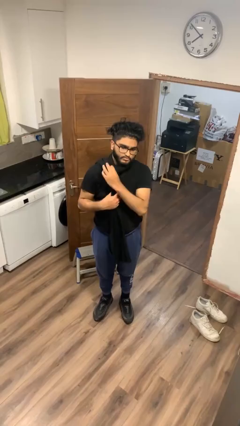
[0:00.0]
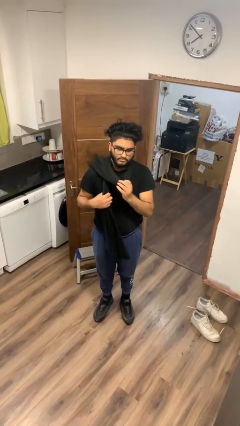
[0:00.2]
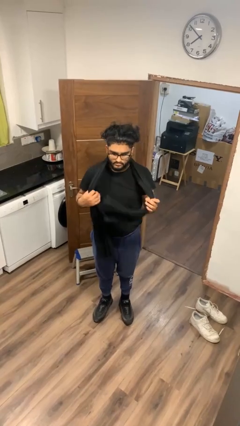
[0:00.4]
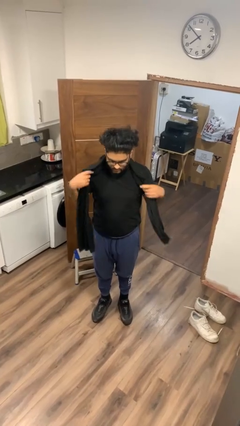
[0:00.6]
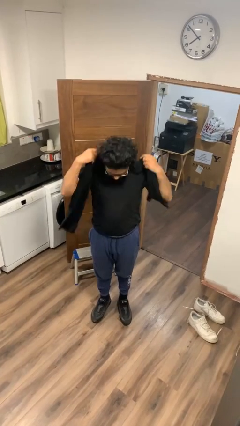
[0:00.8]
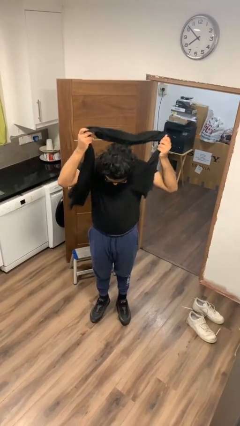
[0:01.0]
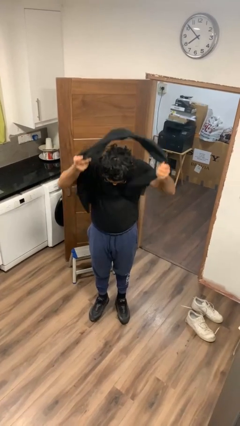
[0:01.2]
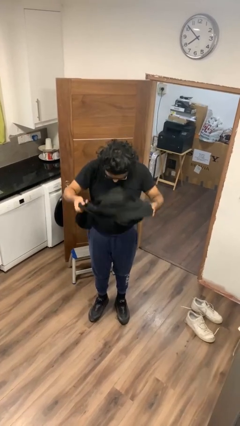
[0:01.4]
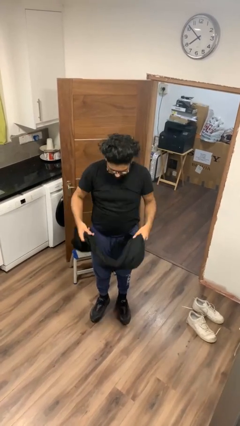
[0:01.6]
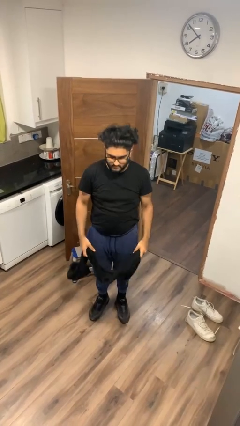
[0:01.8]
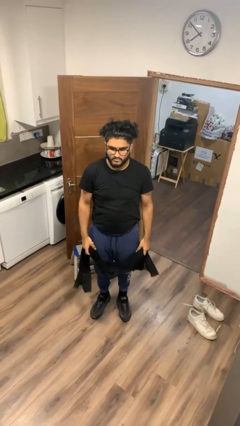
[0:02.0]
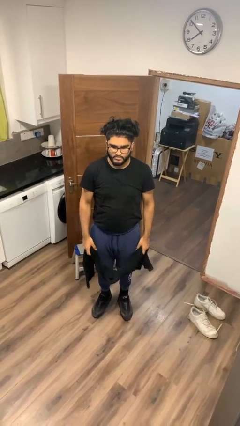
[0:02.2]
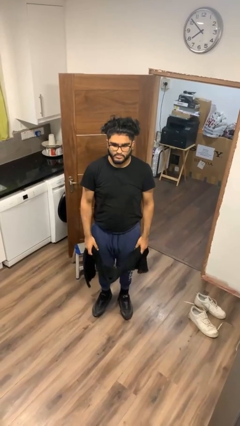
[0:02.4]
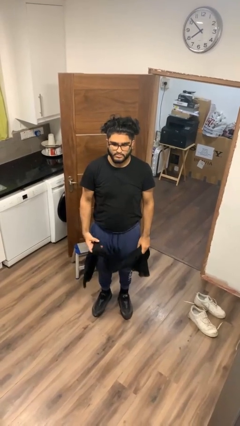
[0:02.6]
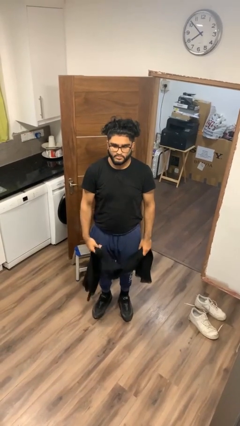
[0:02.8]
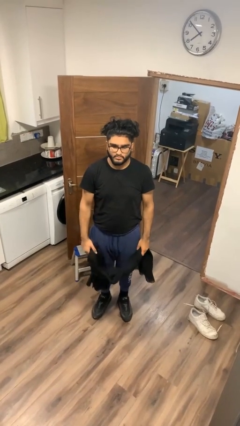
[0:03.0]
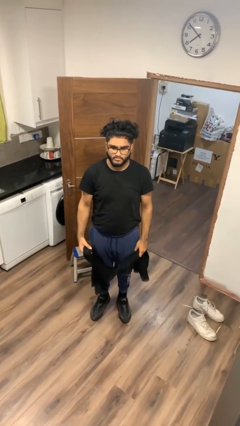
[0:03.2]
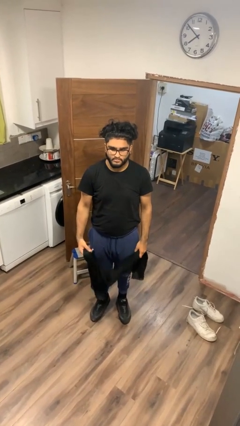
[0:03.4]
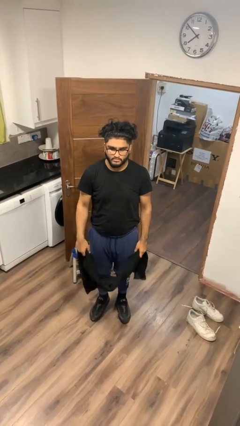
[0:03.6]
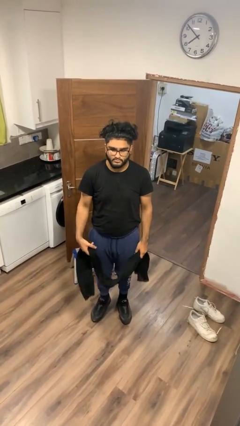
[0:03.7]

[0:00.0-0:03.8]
person takes off scarf

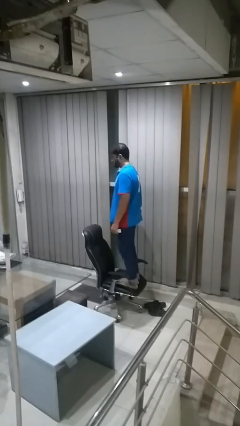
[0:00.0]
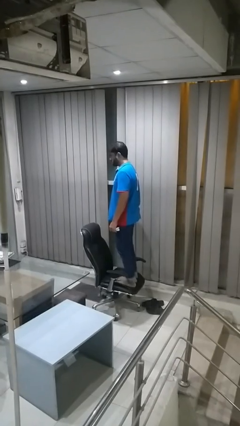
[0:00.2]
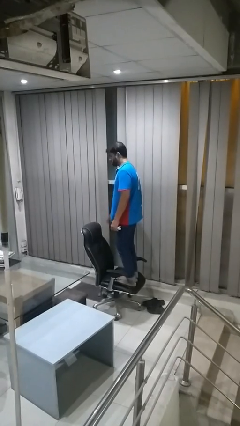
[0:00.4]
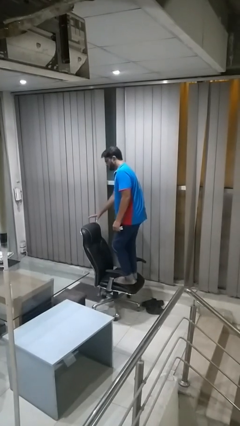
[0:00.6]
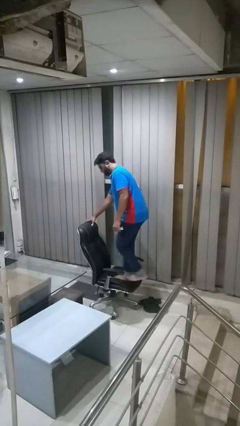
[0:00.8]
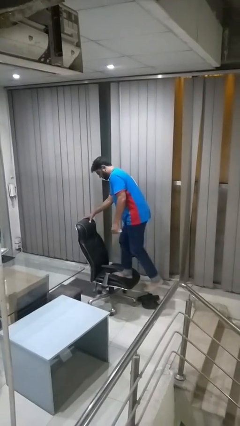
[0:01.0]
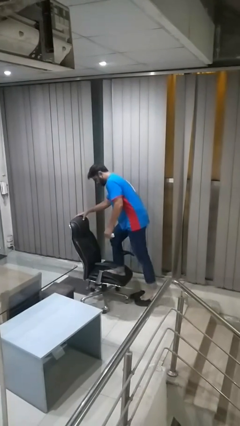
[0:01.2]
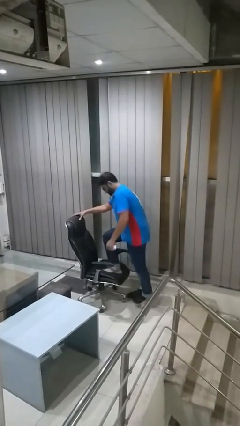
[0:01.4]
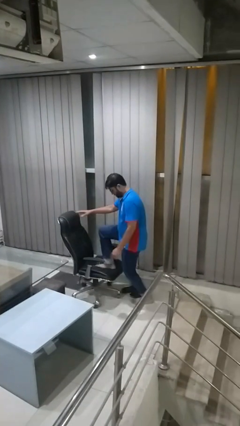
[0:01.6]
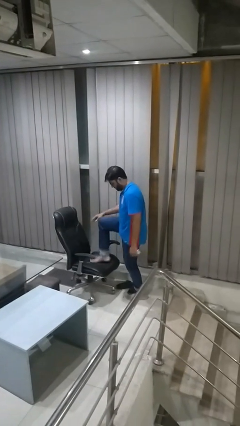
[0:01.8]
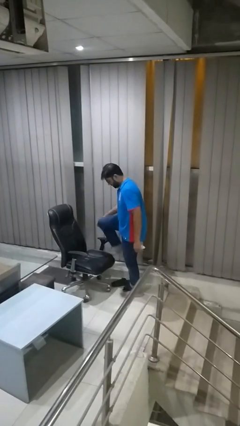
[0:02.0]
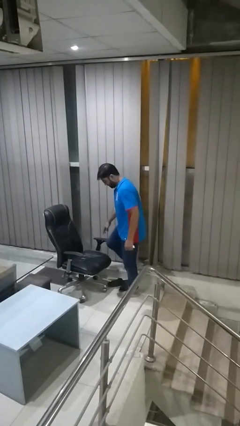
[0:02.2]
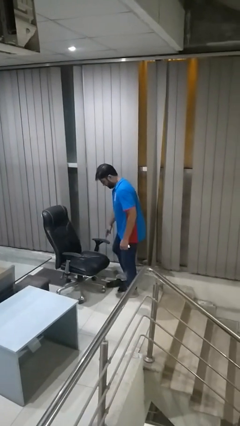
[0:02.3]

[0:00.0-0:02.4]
person climbs off chair

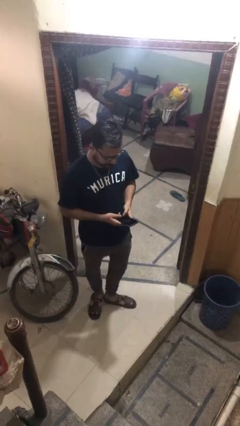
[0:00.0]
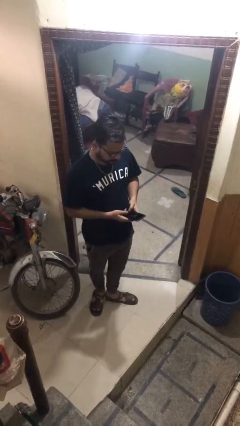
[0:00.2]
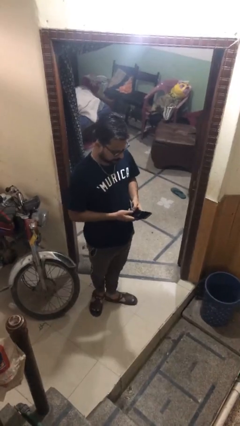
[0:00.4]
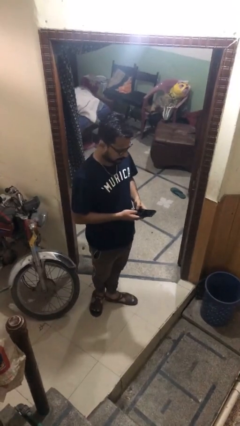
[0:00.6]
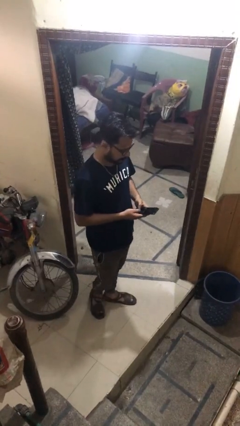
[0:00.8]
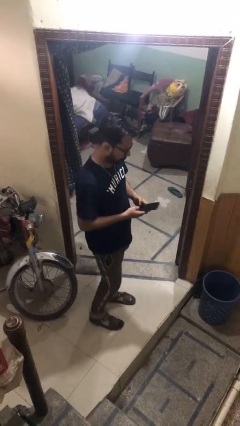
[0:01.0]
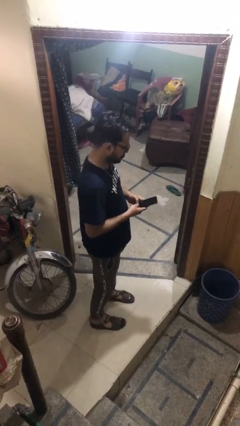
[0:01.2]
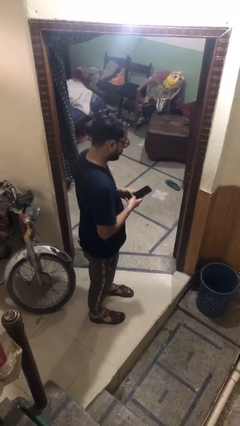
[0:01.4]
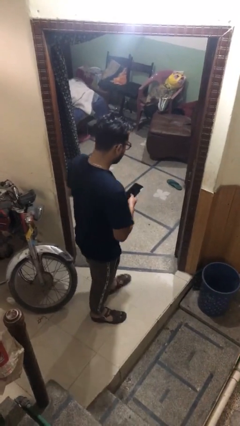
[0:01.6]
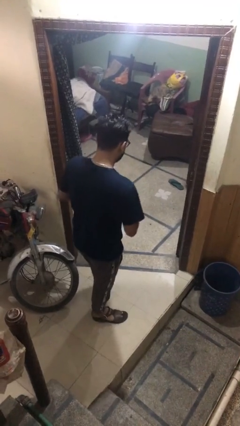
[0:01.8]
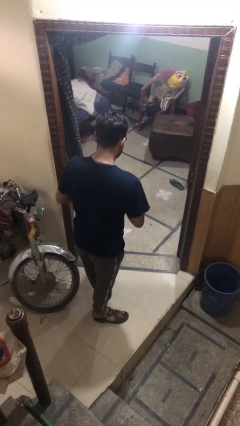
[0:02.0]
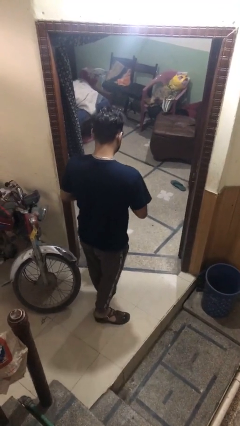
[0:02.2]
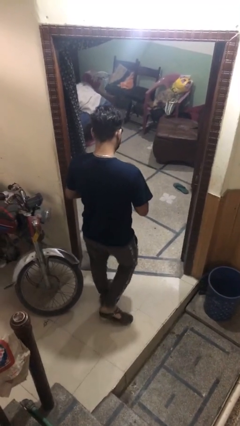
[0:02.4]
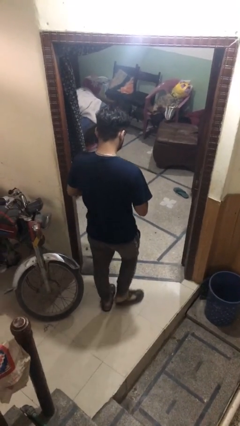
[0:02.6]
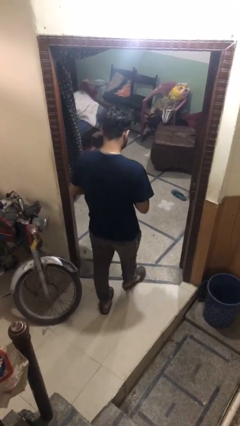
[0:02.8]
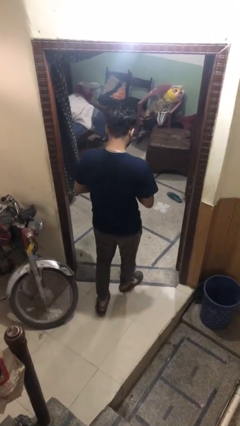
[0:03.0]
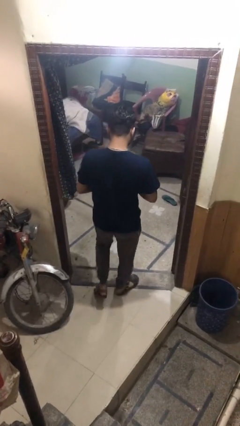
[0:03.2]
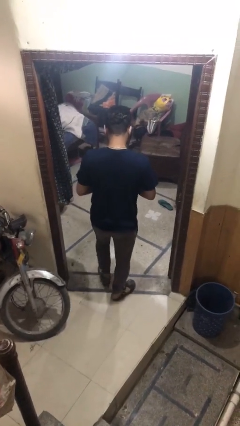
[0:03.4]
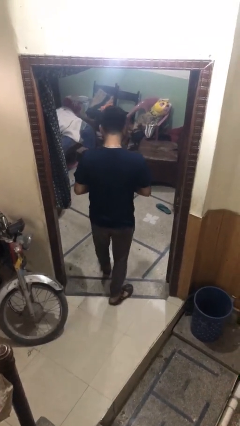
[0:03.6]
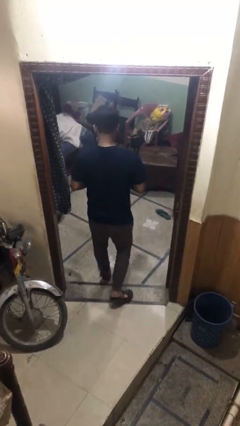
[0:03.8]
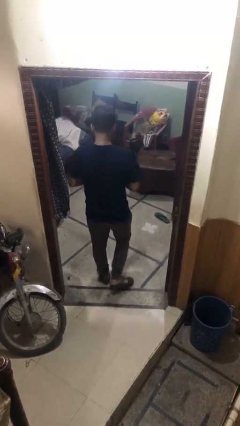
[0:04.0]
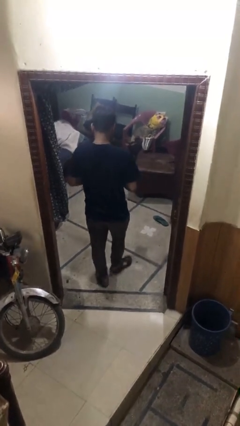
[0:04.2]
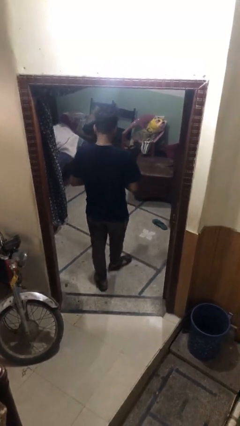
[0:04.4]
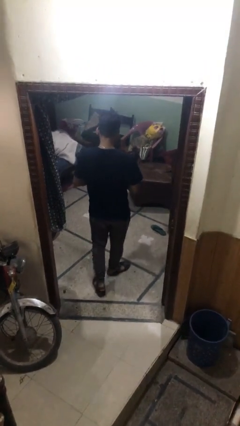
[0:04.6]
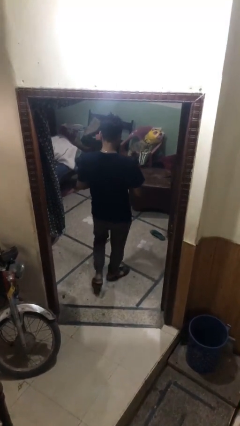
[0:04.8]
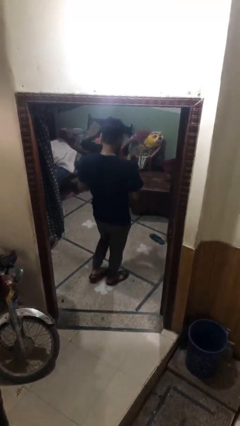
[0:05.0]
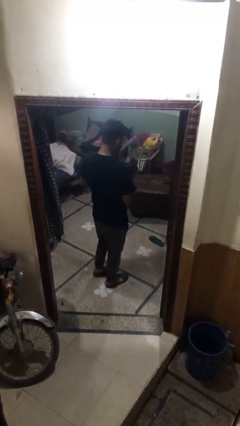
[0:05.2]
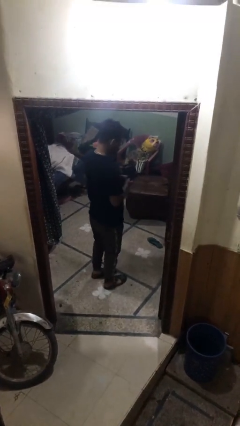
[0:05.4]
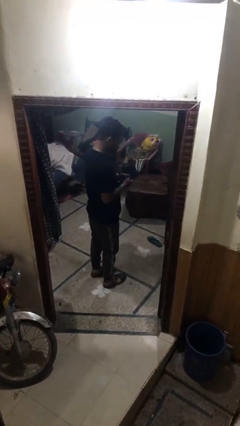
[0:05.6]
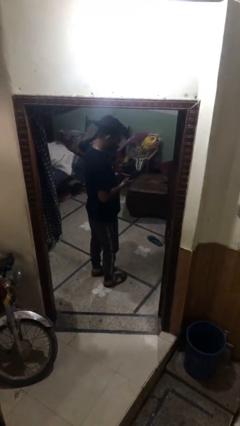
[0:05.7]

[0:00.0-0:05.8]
person exits scene through structure

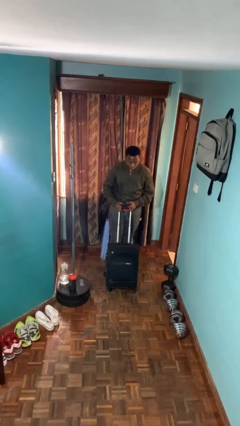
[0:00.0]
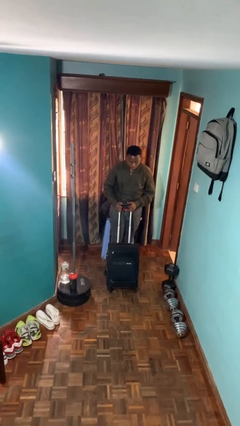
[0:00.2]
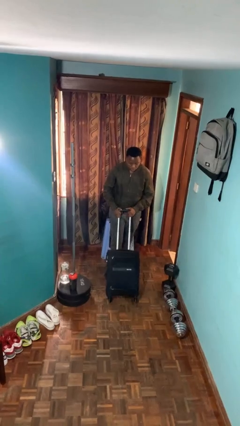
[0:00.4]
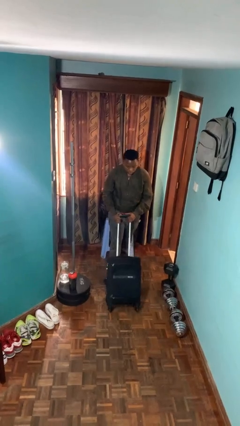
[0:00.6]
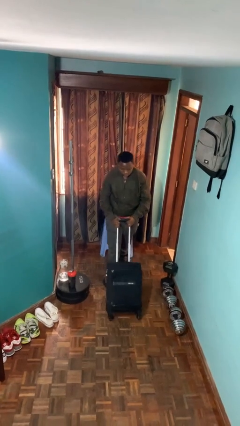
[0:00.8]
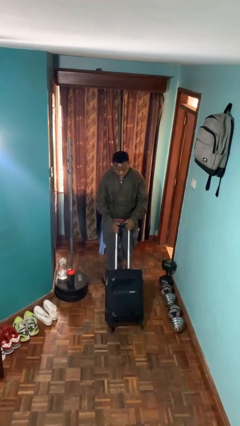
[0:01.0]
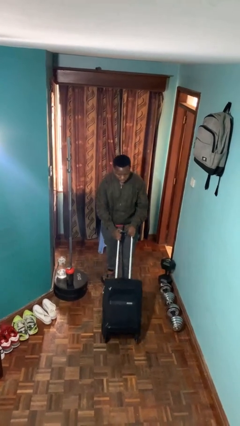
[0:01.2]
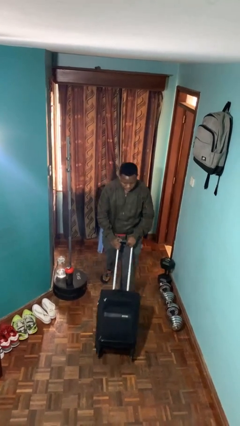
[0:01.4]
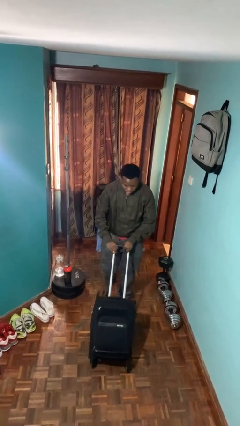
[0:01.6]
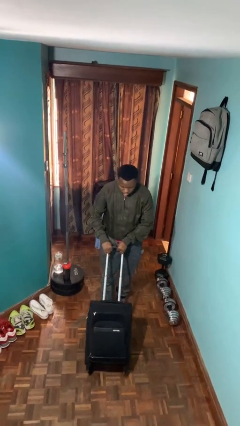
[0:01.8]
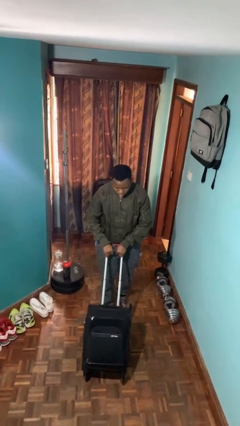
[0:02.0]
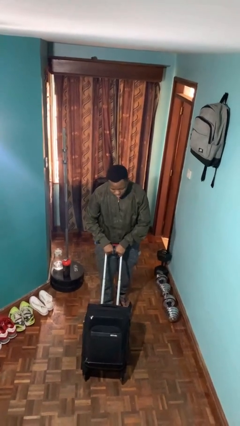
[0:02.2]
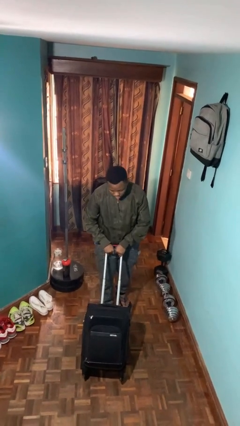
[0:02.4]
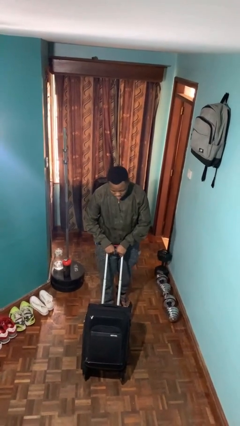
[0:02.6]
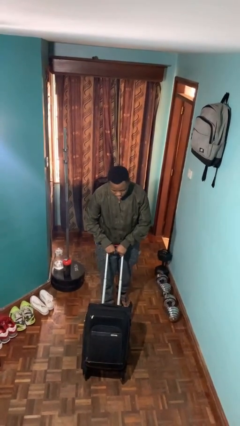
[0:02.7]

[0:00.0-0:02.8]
person pushes wheeled cart

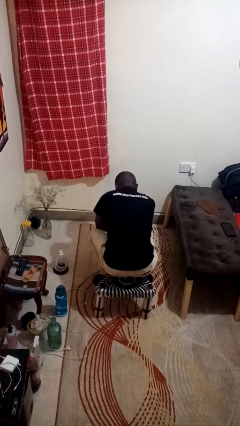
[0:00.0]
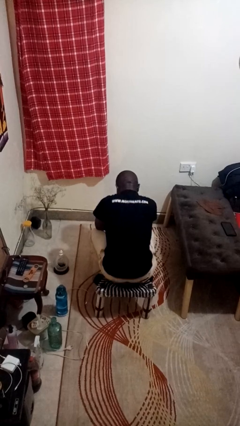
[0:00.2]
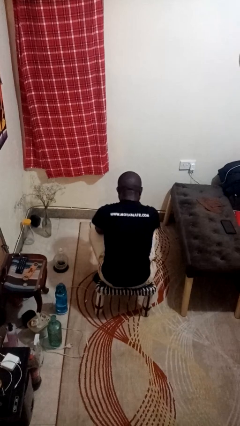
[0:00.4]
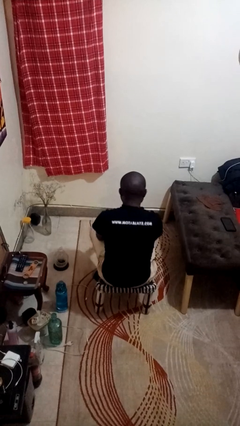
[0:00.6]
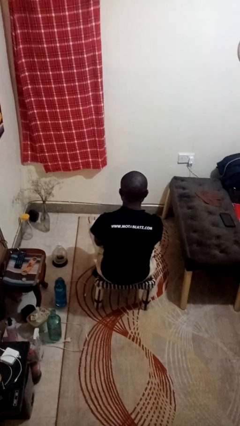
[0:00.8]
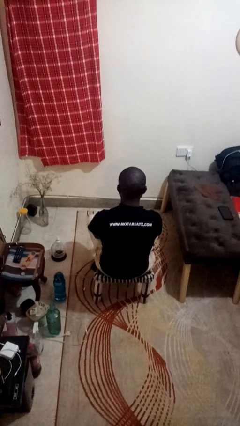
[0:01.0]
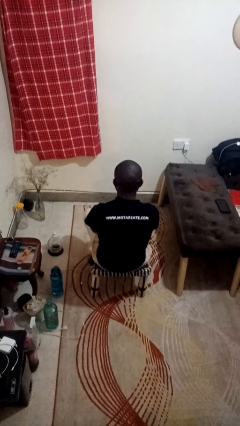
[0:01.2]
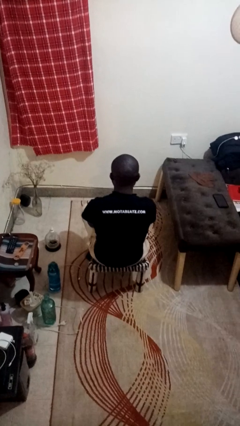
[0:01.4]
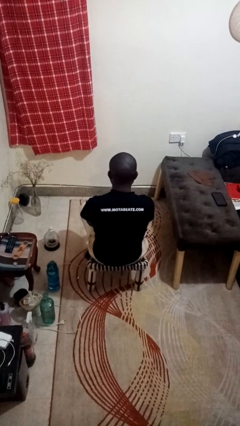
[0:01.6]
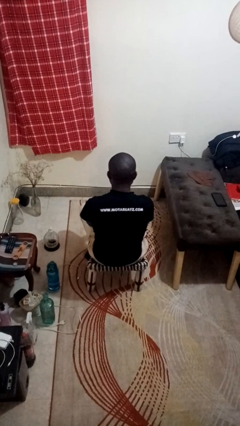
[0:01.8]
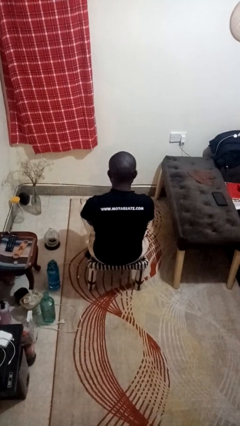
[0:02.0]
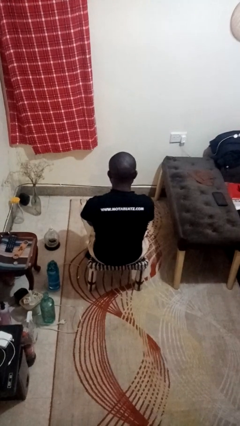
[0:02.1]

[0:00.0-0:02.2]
person sits down

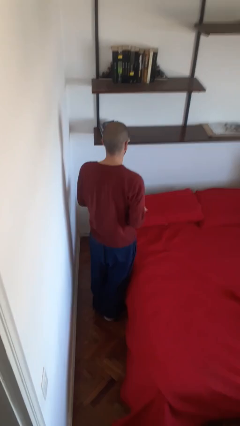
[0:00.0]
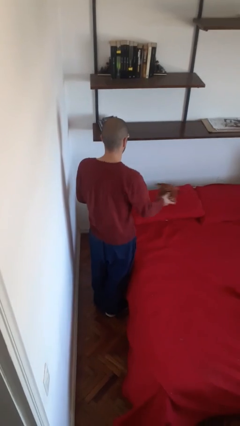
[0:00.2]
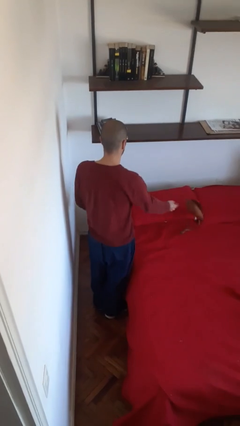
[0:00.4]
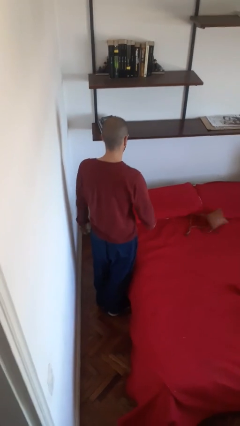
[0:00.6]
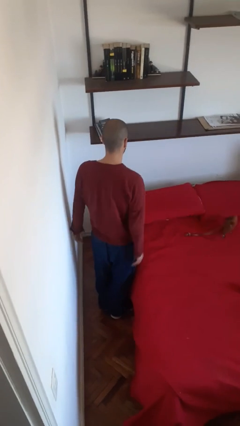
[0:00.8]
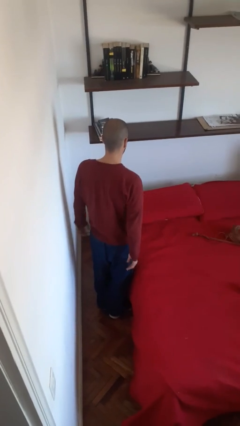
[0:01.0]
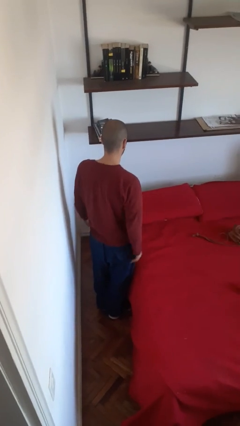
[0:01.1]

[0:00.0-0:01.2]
person throws object on bed
